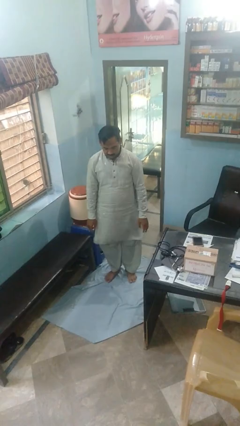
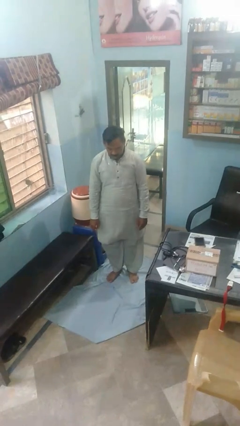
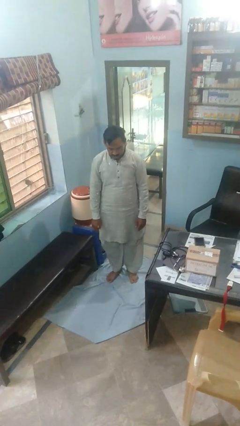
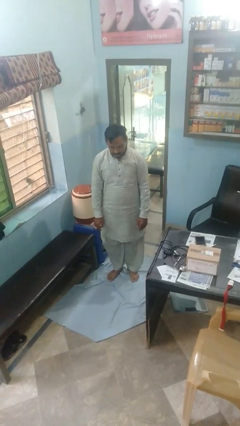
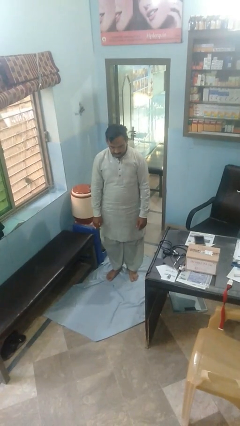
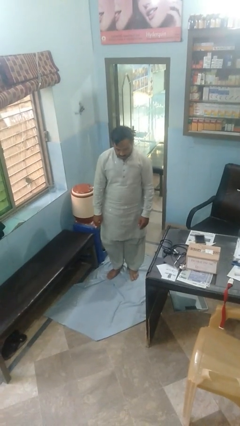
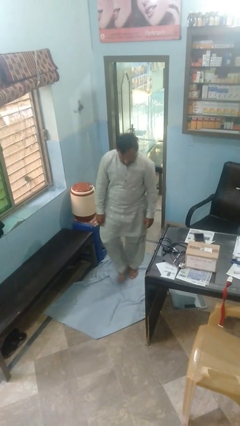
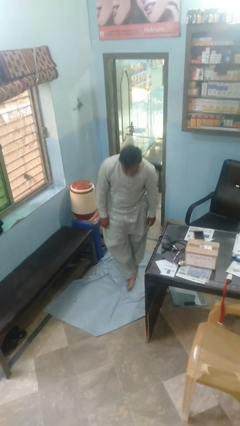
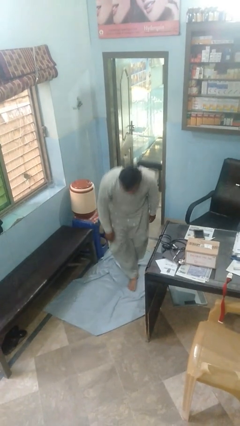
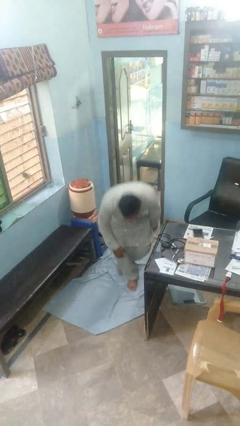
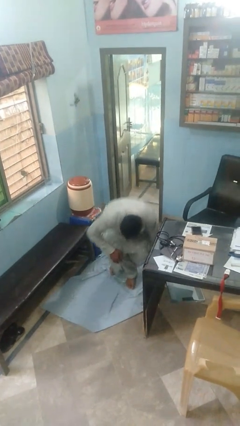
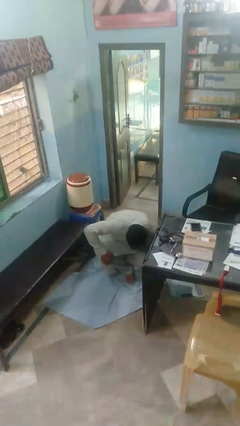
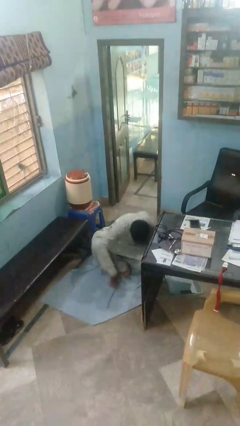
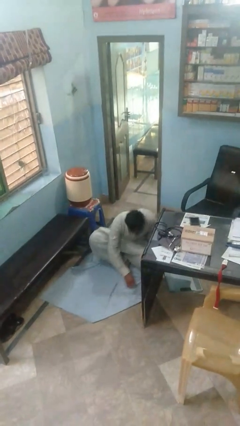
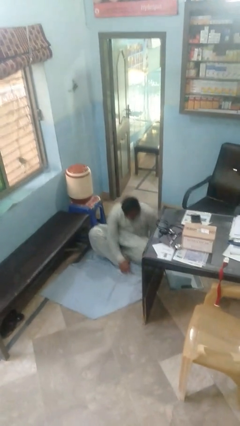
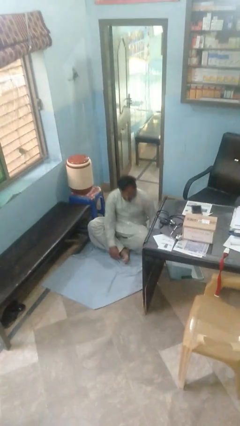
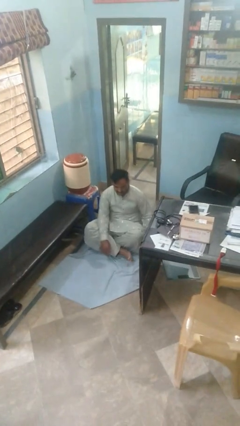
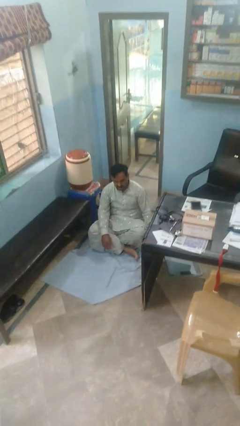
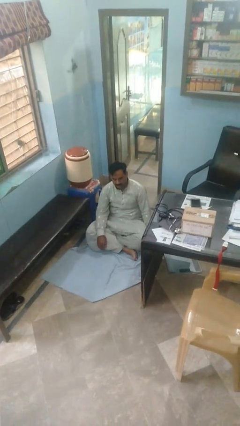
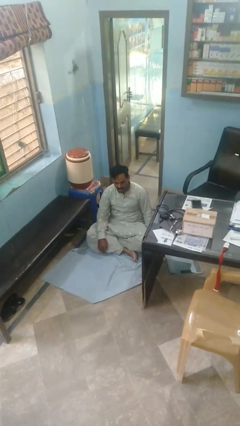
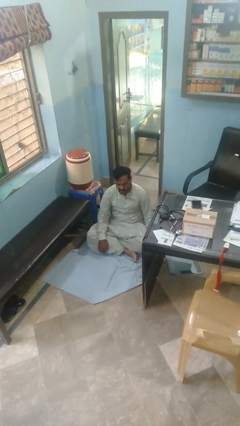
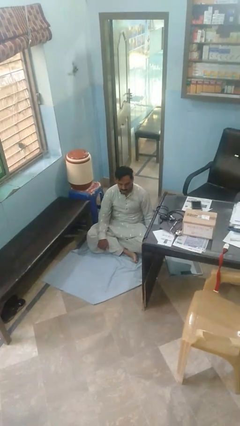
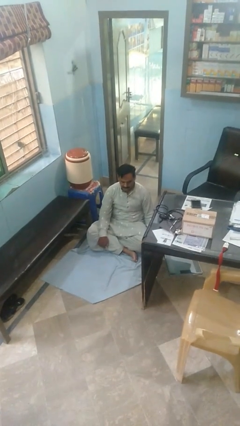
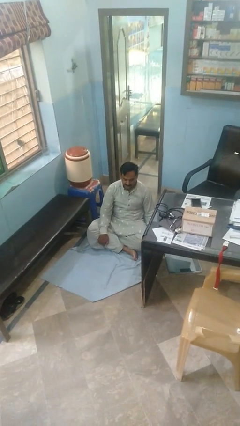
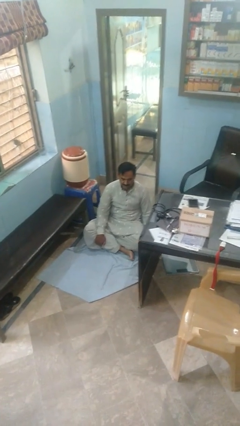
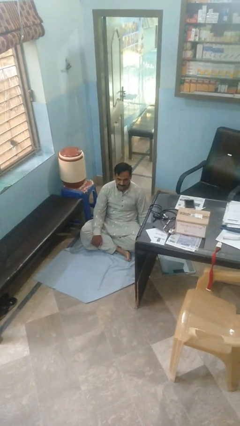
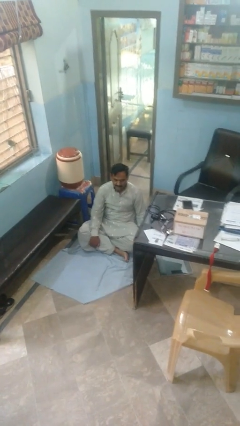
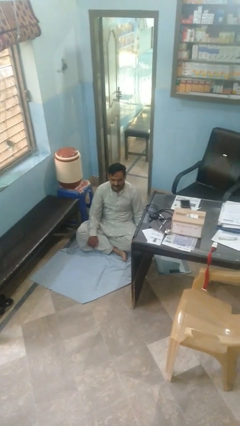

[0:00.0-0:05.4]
person sits crisscross

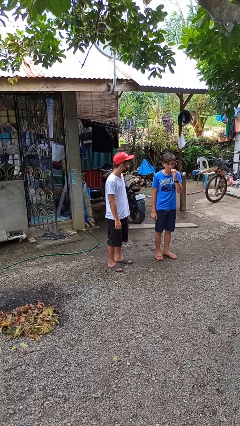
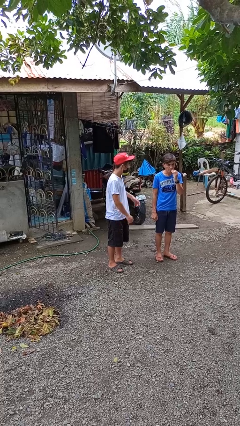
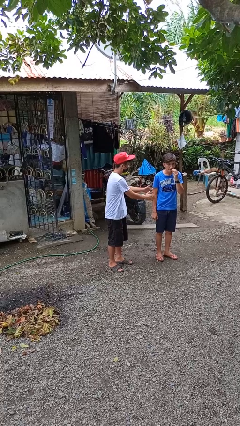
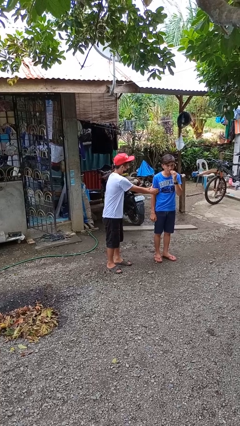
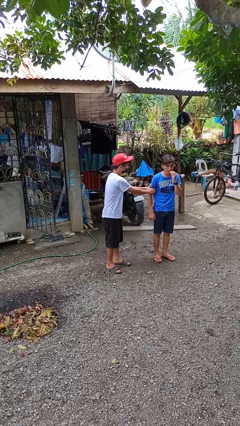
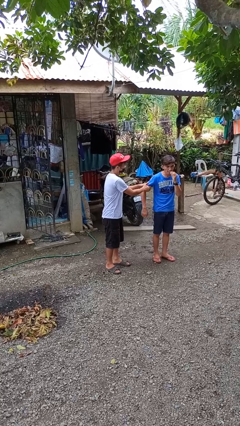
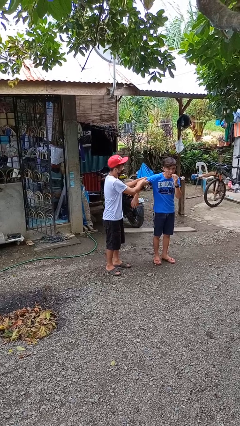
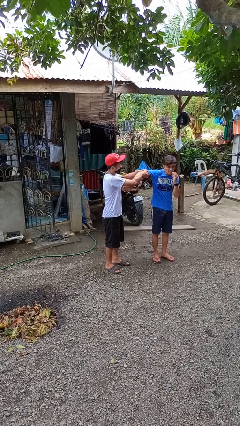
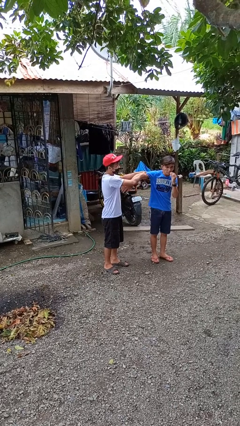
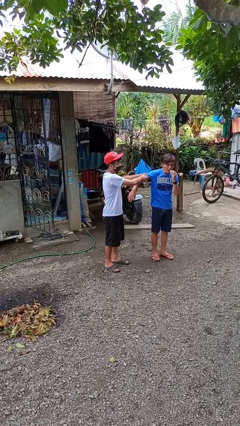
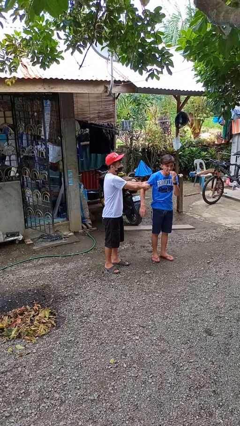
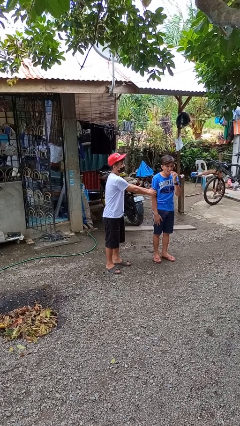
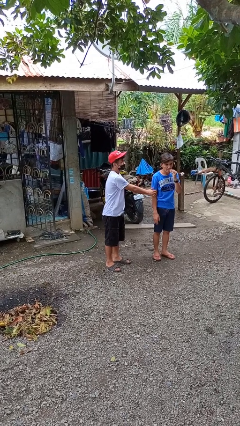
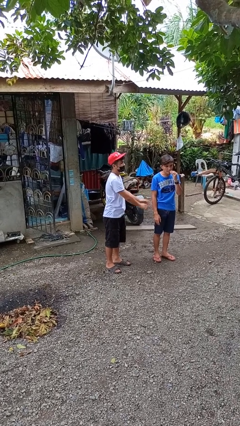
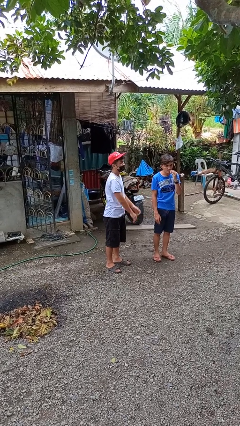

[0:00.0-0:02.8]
person grabs person by bicep

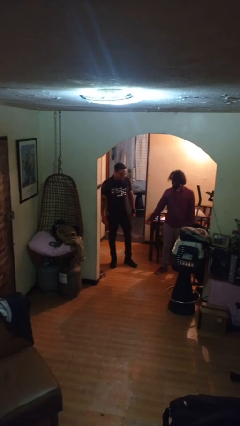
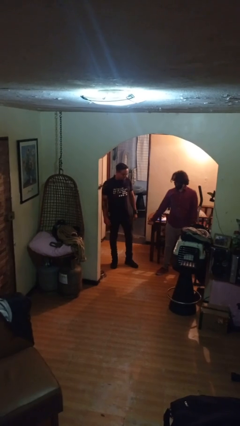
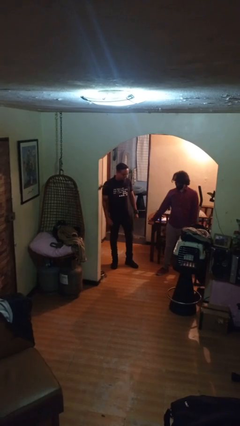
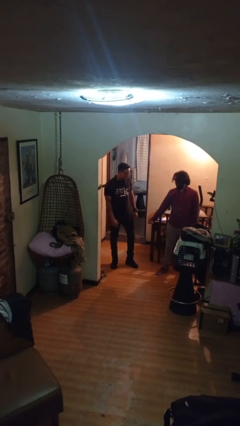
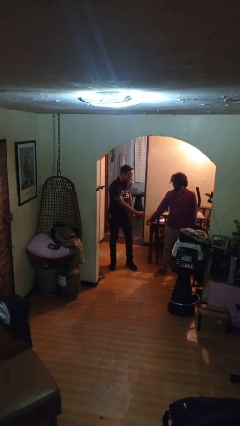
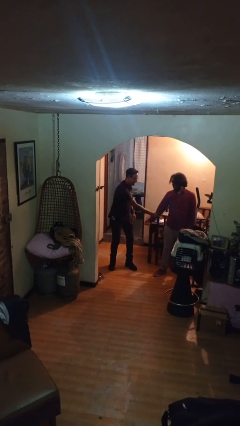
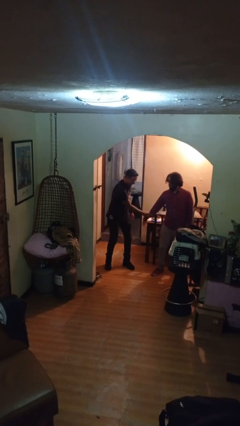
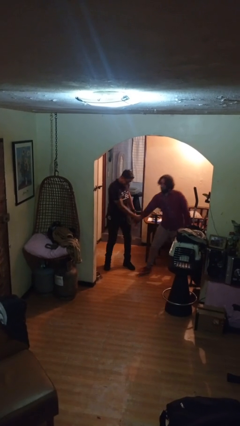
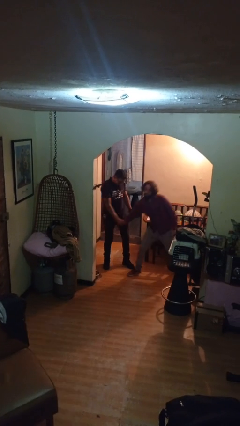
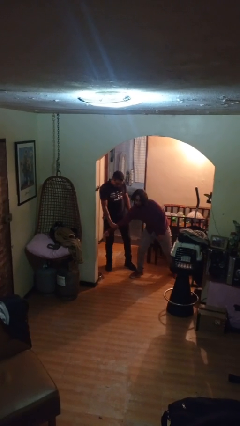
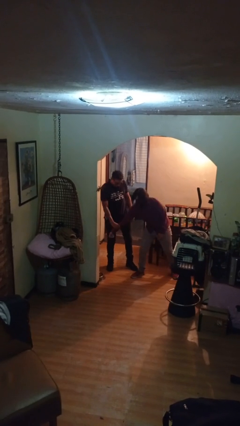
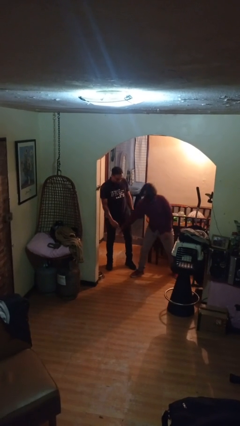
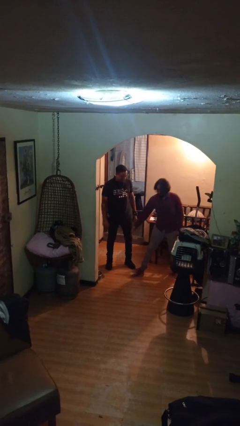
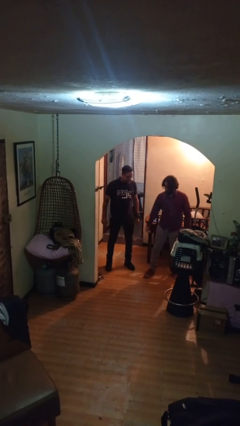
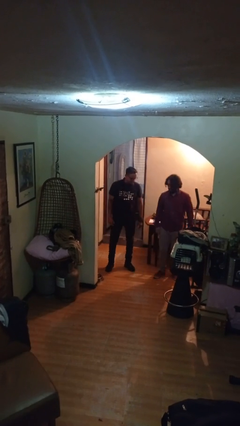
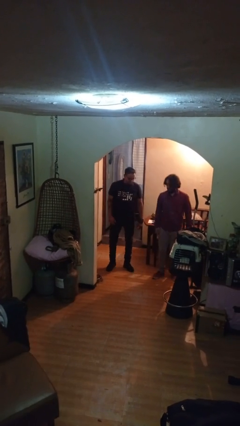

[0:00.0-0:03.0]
person grabs person by forearm

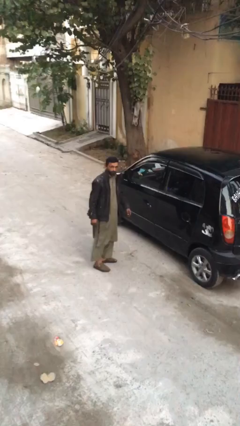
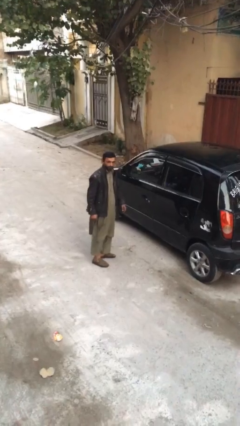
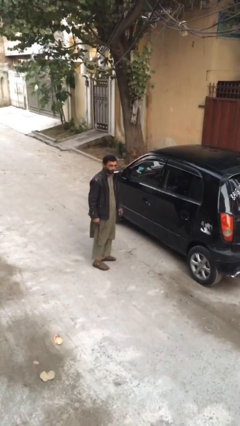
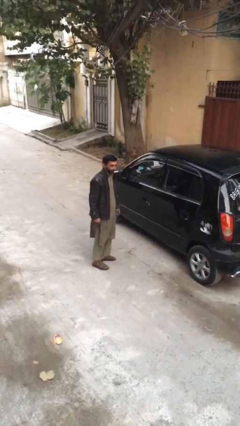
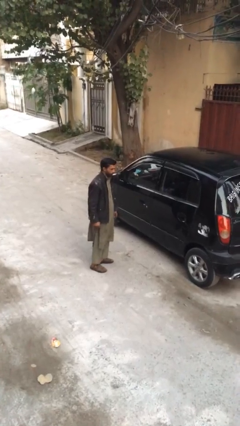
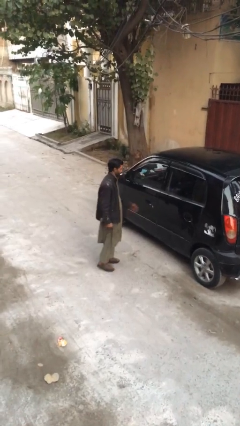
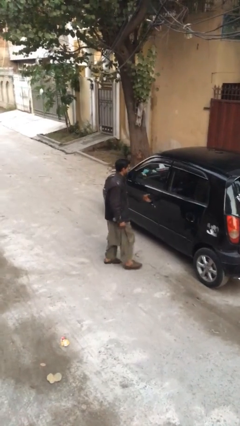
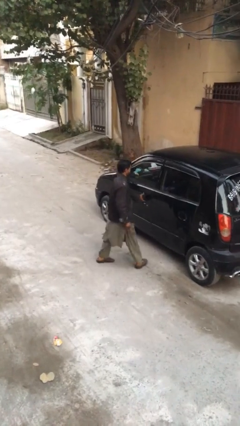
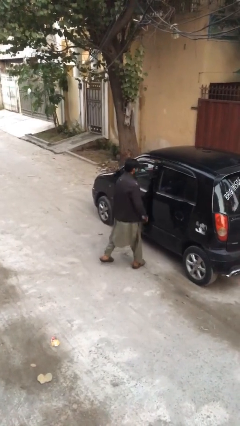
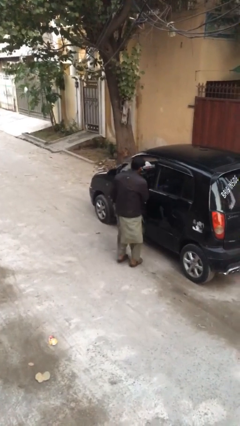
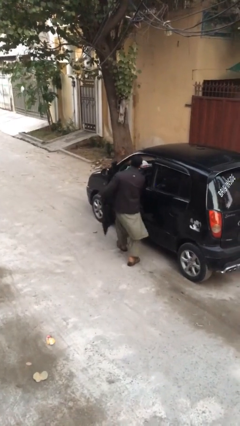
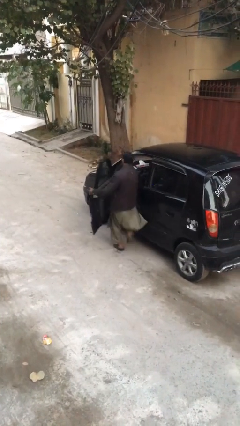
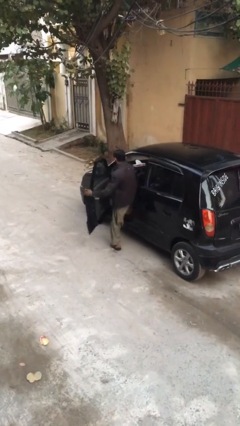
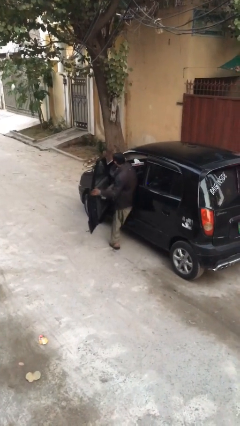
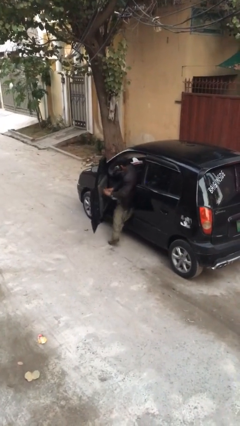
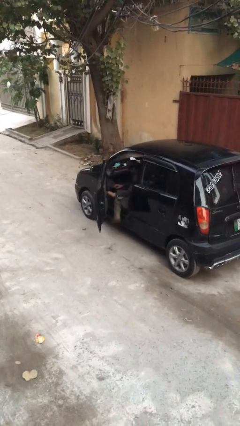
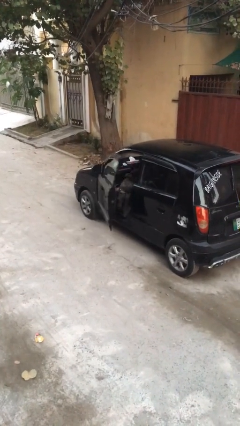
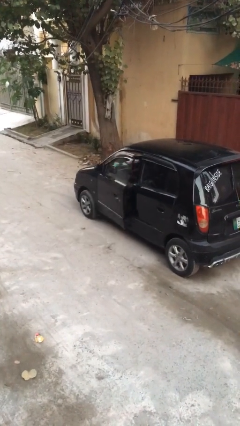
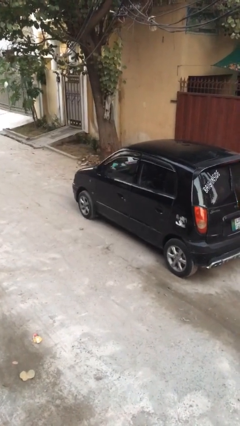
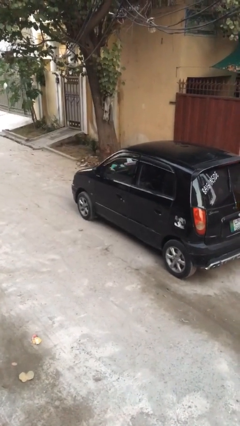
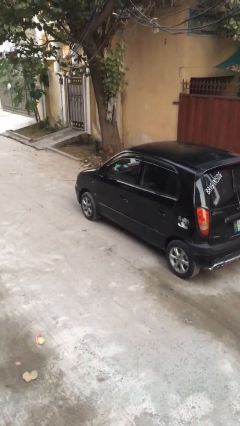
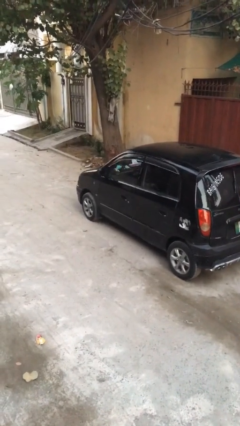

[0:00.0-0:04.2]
car picks up person

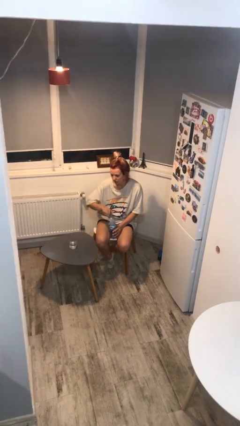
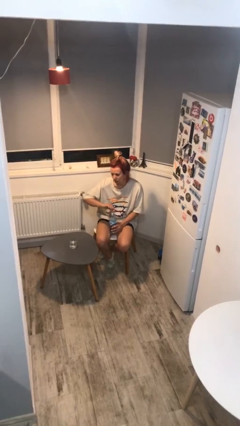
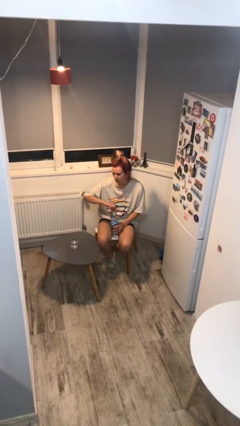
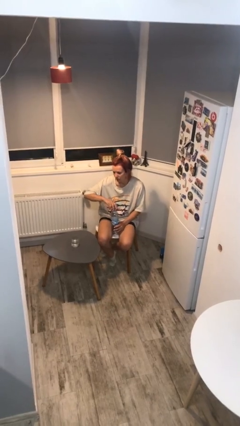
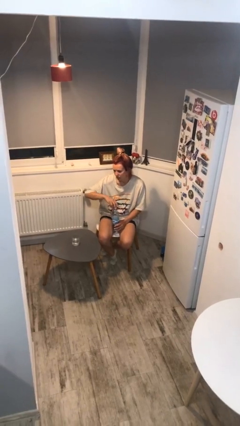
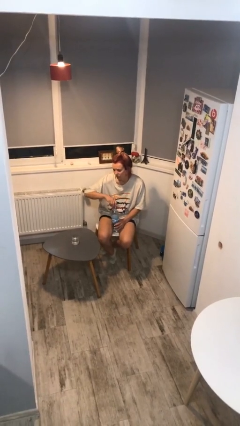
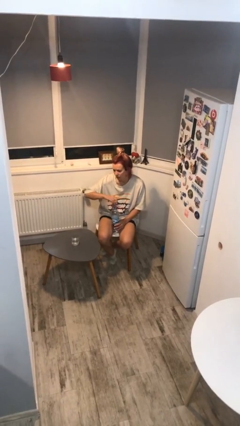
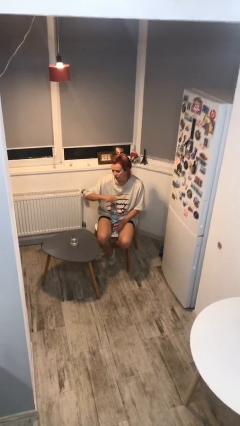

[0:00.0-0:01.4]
person unscrews lid from bottle

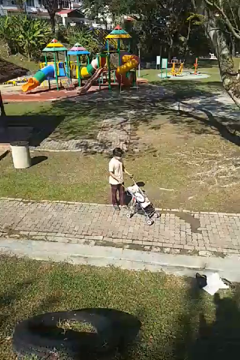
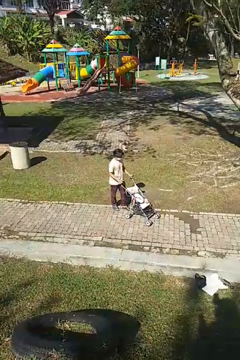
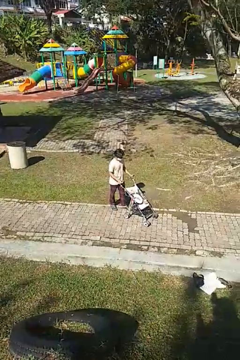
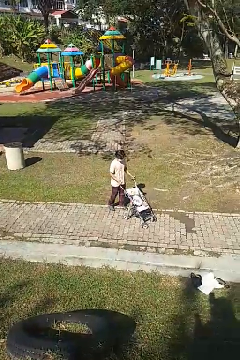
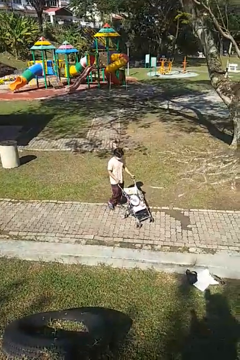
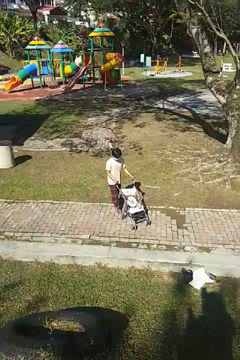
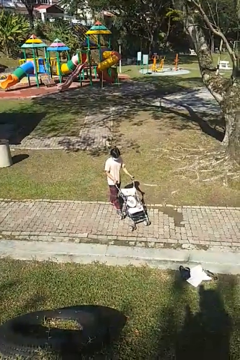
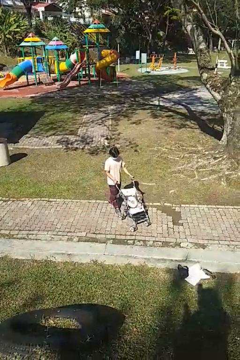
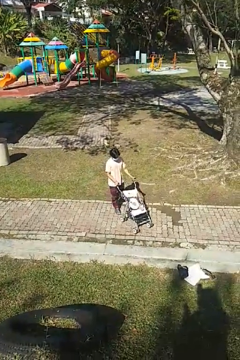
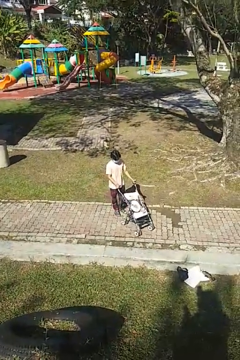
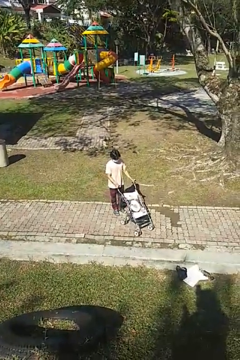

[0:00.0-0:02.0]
person pushes wheeled cart
